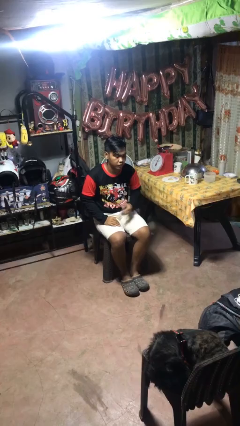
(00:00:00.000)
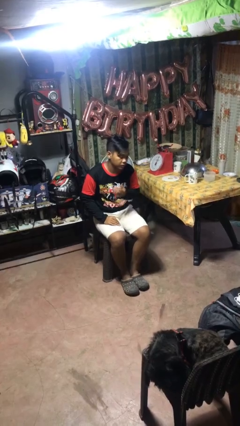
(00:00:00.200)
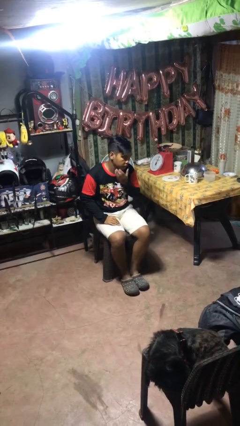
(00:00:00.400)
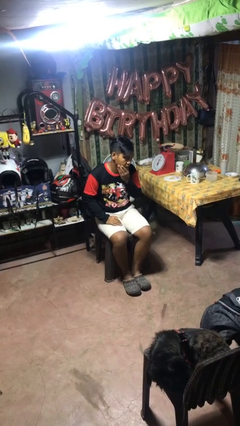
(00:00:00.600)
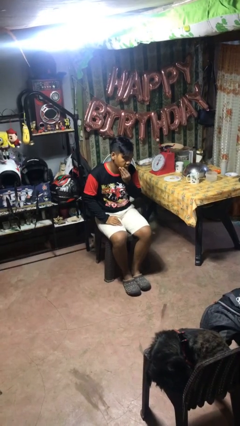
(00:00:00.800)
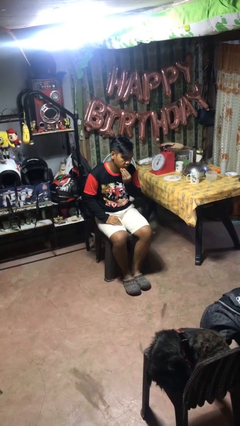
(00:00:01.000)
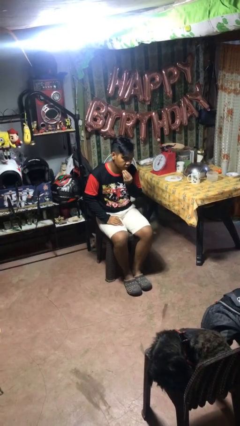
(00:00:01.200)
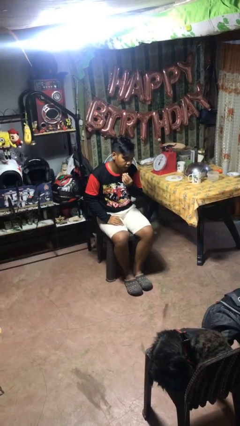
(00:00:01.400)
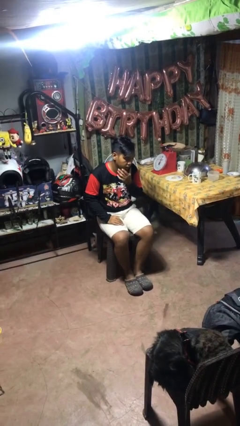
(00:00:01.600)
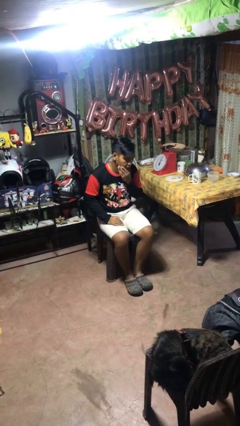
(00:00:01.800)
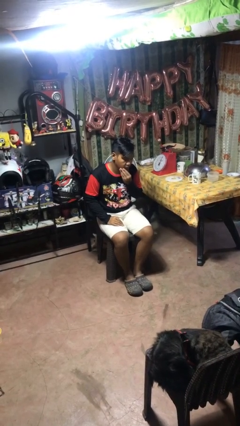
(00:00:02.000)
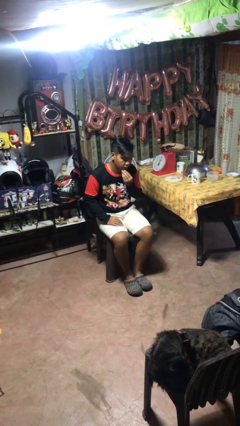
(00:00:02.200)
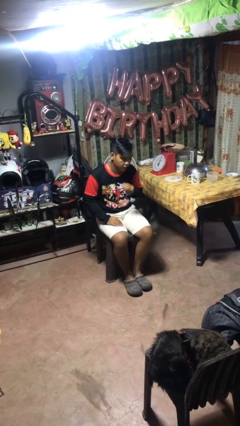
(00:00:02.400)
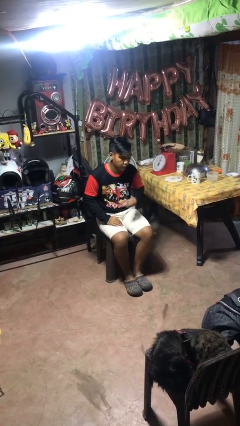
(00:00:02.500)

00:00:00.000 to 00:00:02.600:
person strokes chin

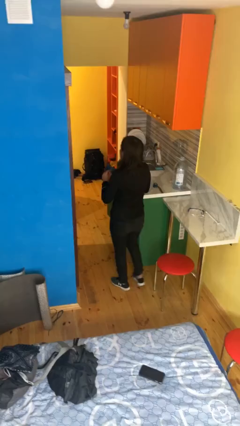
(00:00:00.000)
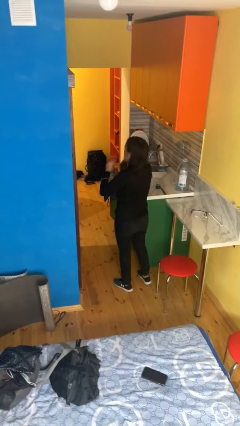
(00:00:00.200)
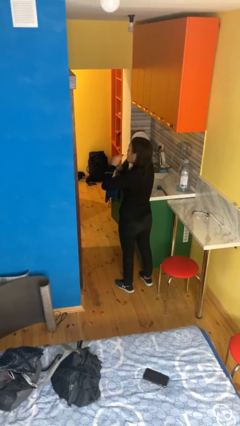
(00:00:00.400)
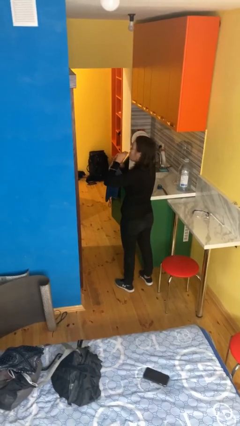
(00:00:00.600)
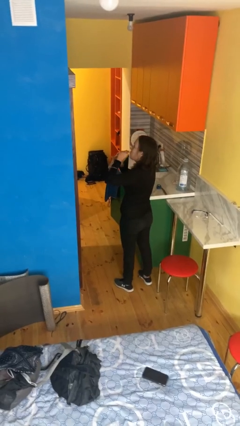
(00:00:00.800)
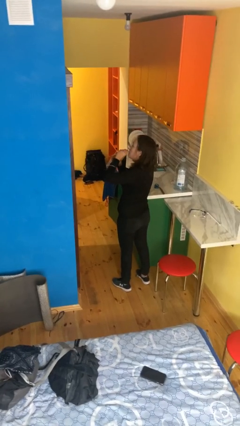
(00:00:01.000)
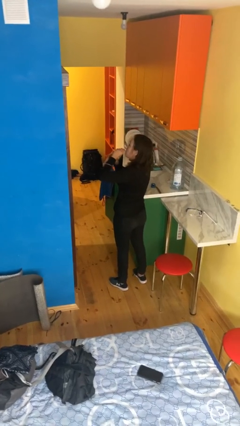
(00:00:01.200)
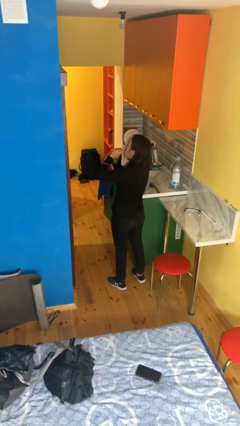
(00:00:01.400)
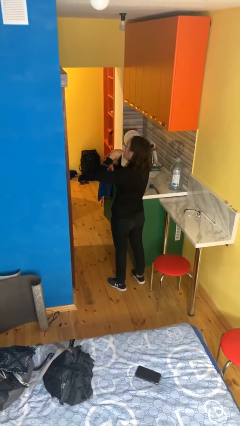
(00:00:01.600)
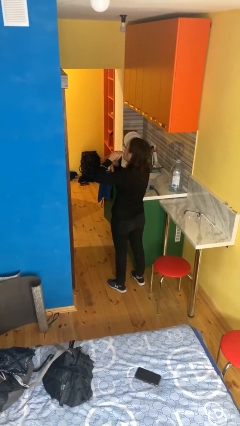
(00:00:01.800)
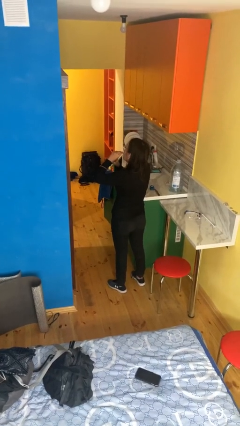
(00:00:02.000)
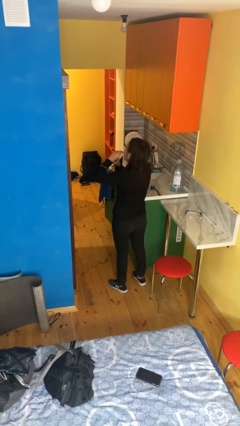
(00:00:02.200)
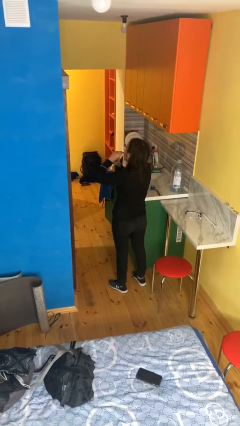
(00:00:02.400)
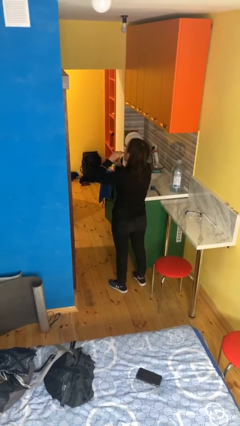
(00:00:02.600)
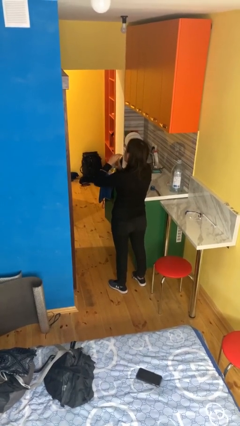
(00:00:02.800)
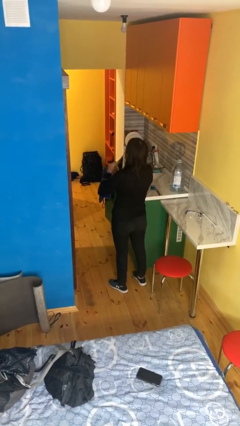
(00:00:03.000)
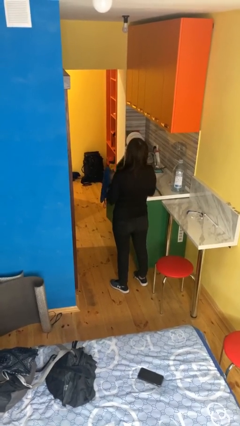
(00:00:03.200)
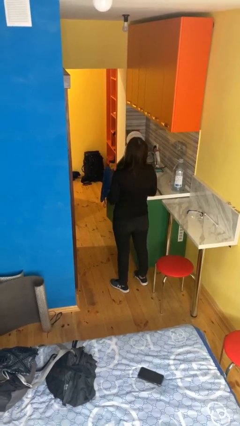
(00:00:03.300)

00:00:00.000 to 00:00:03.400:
person drinks from straw

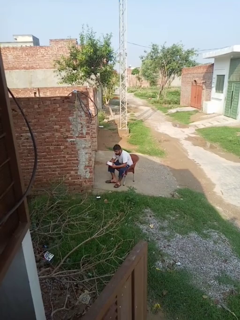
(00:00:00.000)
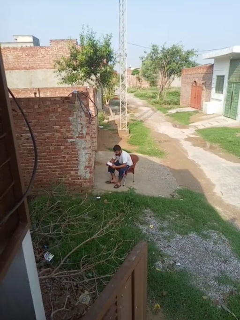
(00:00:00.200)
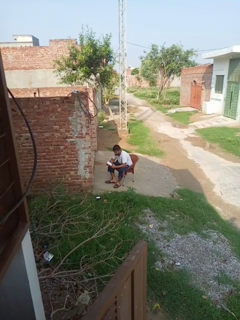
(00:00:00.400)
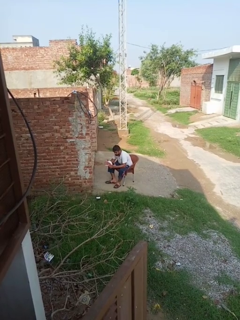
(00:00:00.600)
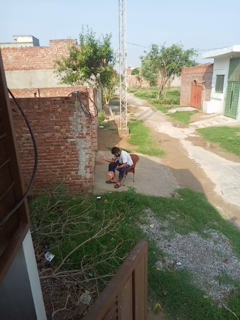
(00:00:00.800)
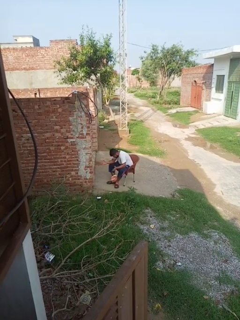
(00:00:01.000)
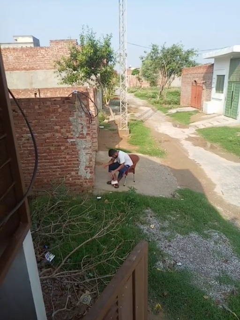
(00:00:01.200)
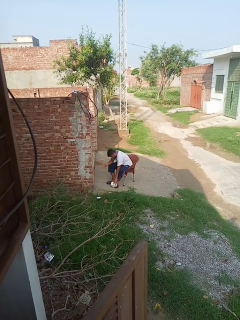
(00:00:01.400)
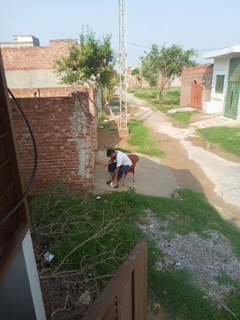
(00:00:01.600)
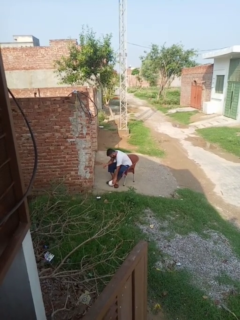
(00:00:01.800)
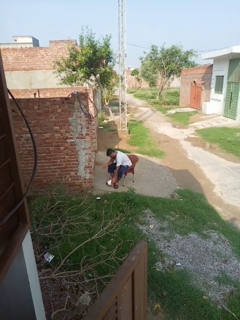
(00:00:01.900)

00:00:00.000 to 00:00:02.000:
person drops object

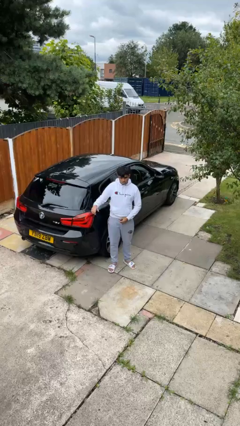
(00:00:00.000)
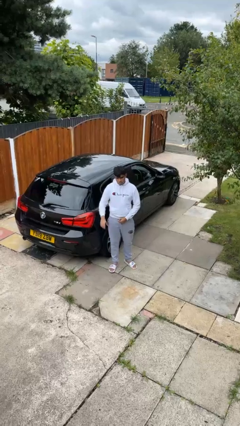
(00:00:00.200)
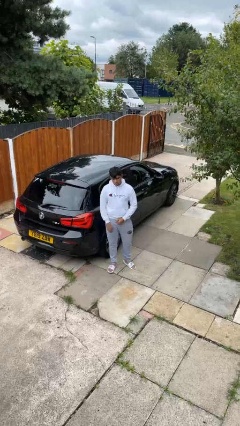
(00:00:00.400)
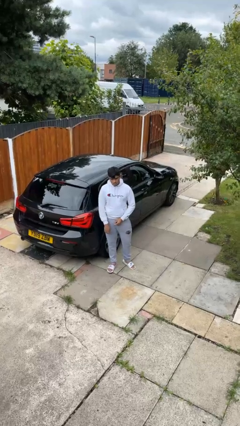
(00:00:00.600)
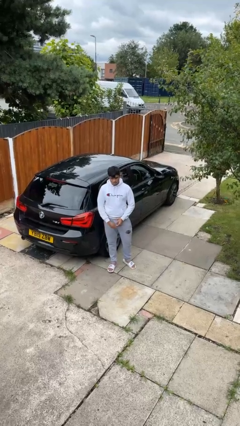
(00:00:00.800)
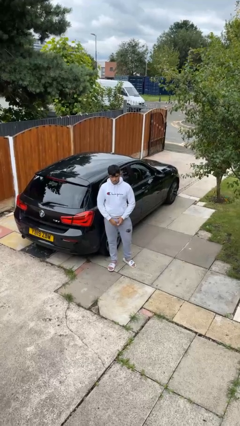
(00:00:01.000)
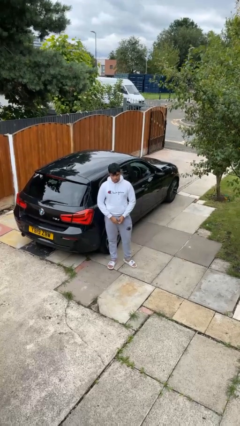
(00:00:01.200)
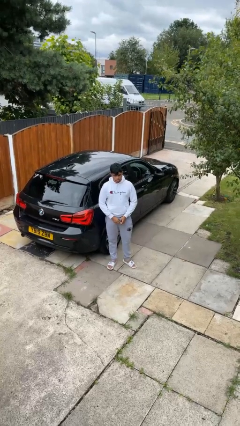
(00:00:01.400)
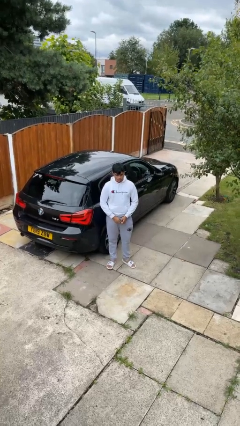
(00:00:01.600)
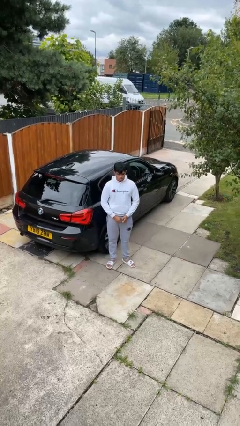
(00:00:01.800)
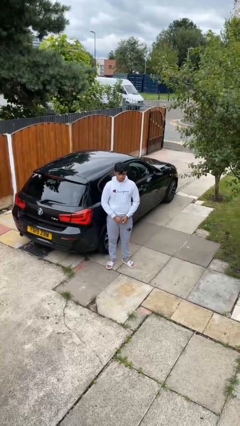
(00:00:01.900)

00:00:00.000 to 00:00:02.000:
person gestures lower hand

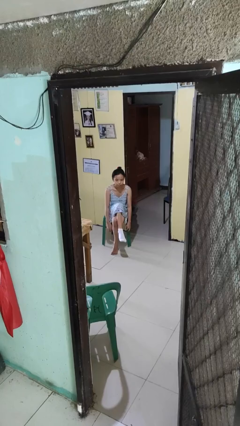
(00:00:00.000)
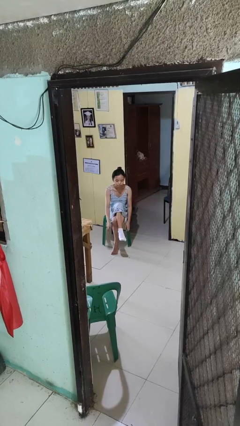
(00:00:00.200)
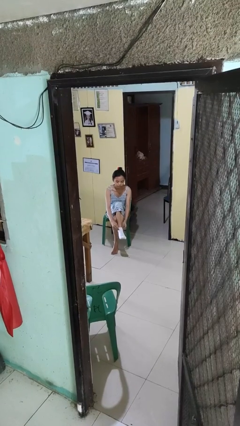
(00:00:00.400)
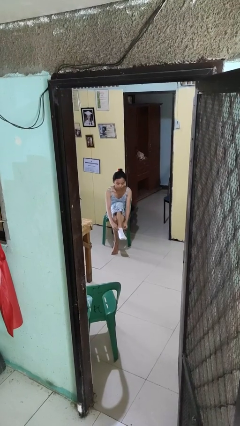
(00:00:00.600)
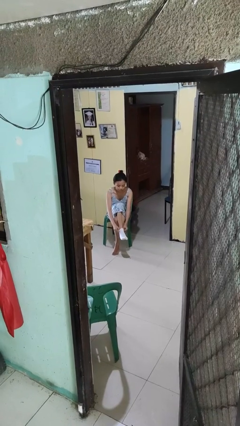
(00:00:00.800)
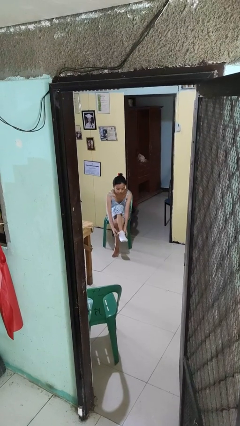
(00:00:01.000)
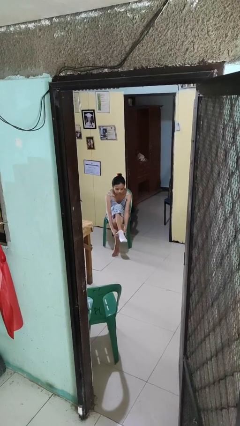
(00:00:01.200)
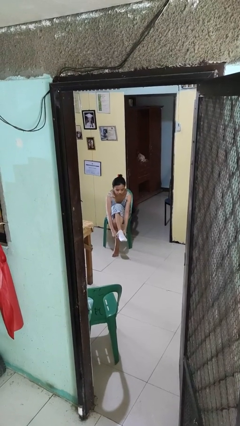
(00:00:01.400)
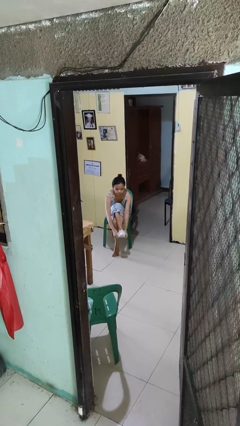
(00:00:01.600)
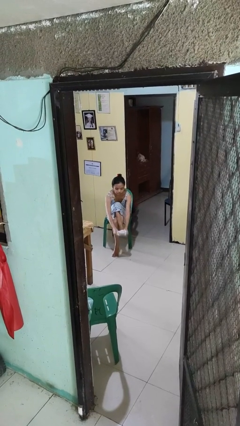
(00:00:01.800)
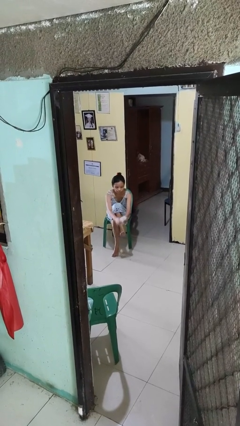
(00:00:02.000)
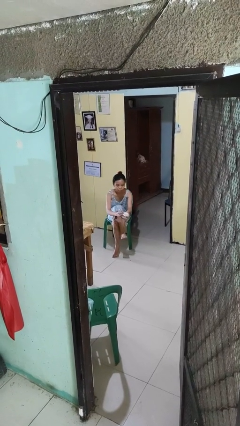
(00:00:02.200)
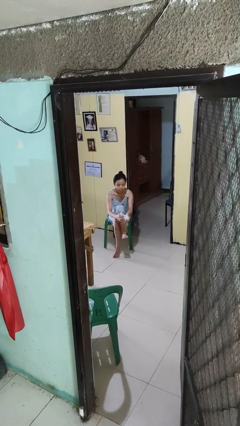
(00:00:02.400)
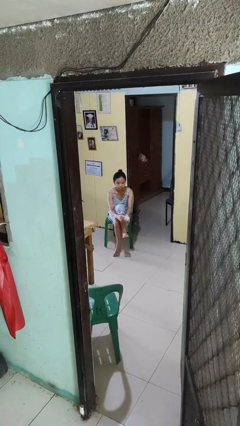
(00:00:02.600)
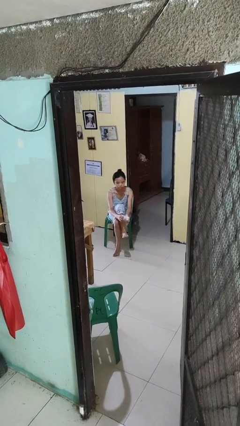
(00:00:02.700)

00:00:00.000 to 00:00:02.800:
person takes off socks

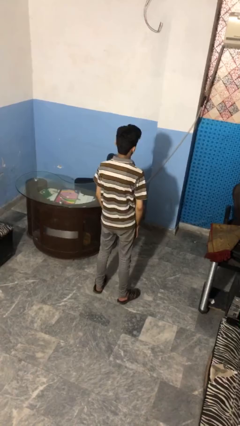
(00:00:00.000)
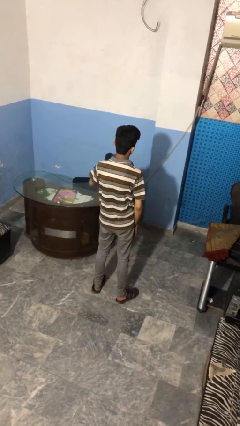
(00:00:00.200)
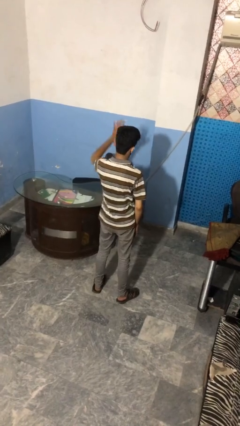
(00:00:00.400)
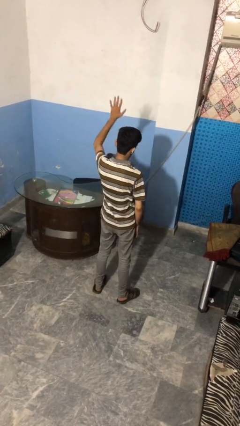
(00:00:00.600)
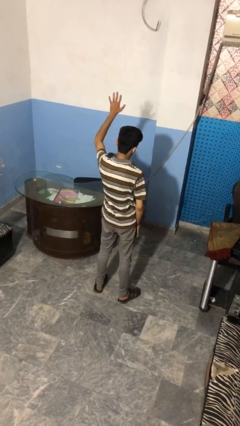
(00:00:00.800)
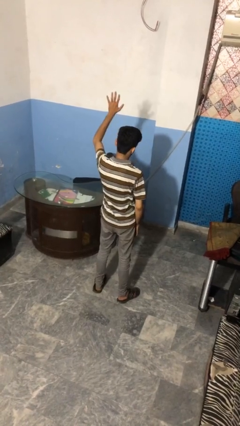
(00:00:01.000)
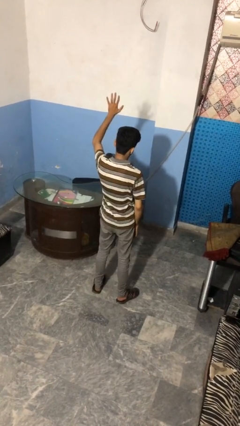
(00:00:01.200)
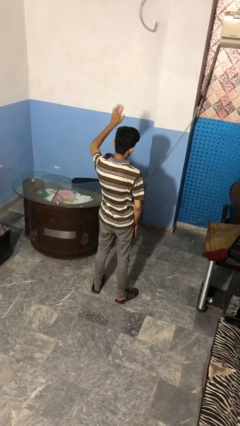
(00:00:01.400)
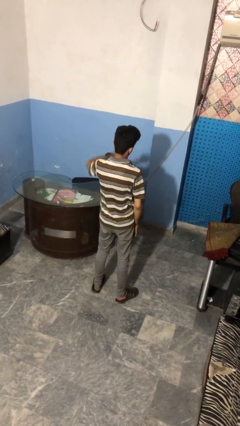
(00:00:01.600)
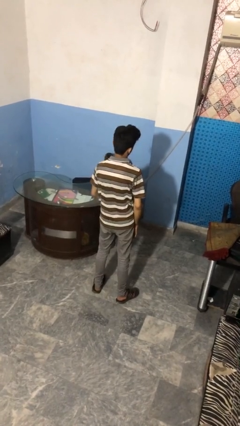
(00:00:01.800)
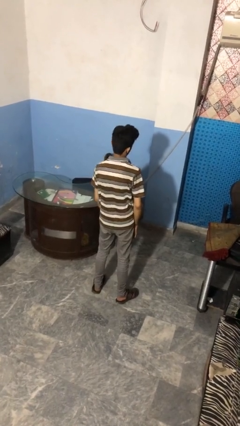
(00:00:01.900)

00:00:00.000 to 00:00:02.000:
person gestures number five

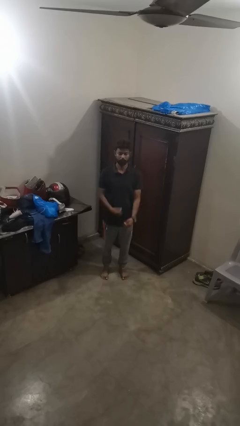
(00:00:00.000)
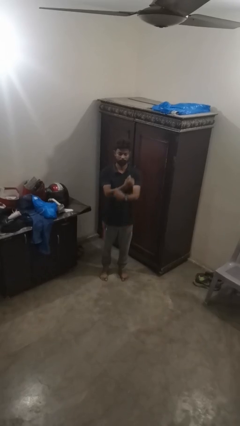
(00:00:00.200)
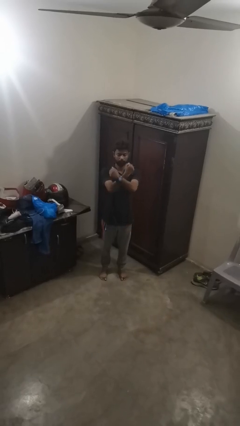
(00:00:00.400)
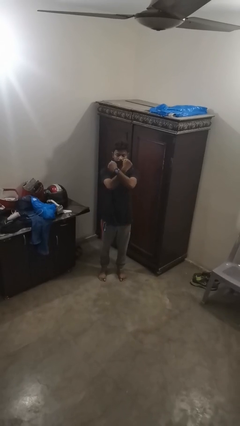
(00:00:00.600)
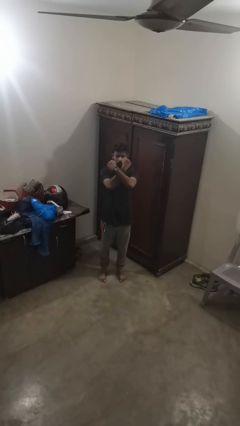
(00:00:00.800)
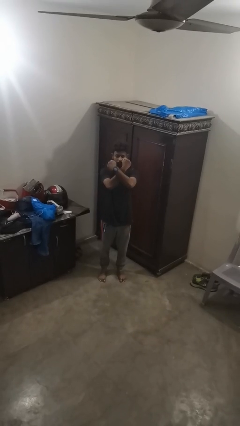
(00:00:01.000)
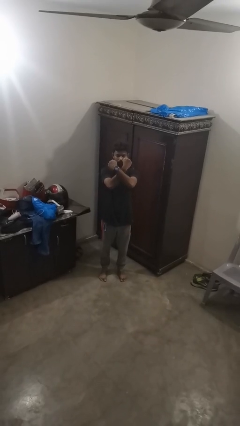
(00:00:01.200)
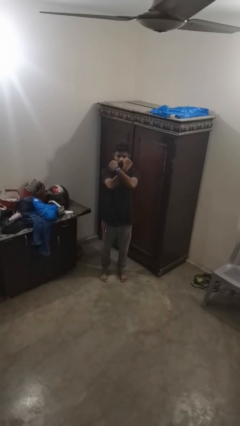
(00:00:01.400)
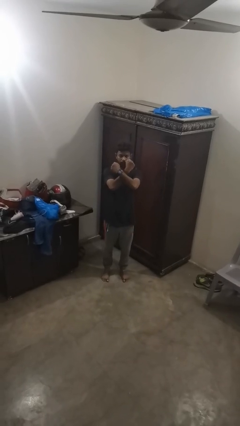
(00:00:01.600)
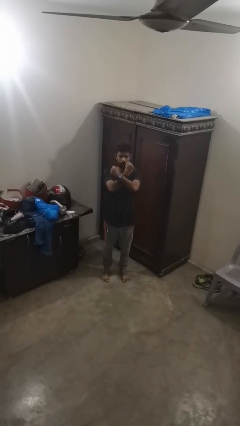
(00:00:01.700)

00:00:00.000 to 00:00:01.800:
person gestures arms x

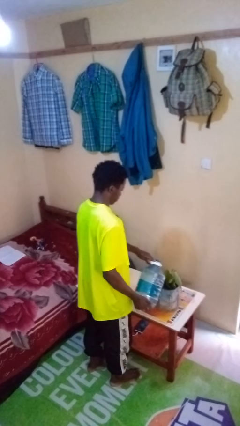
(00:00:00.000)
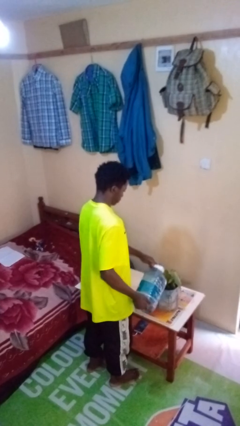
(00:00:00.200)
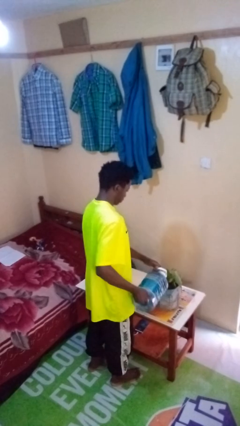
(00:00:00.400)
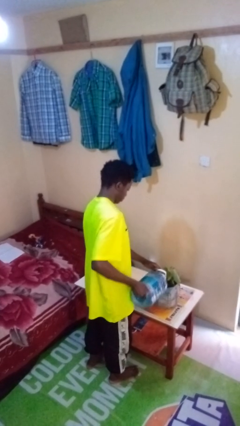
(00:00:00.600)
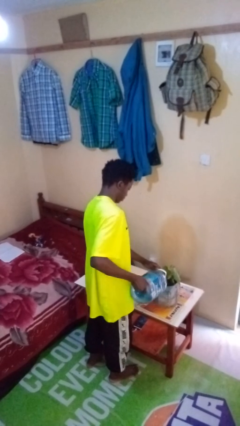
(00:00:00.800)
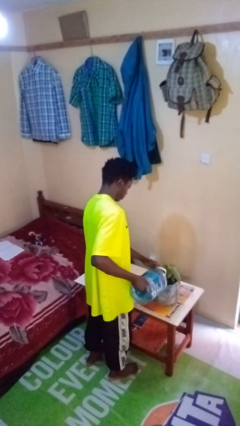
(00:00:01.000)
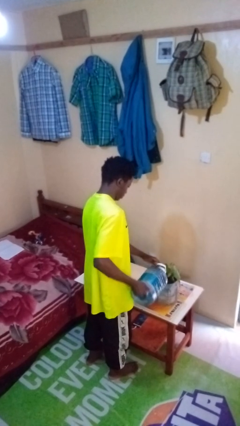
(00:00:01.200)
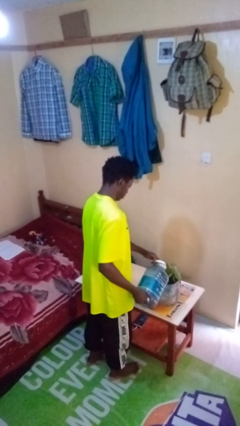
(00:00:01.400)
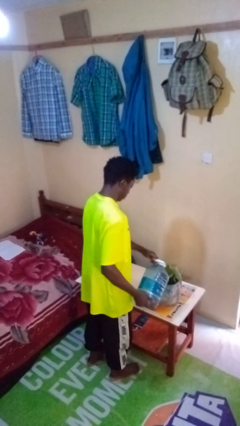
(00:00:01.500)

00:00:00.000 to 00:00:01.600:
person waters houseplant
